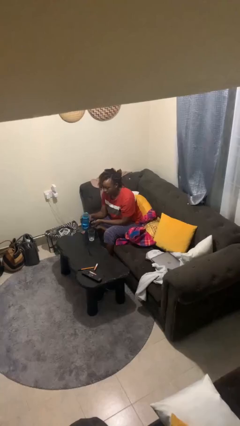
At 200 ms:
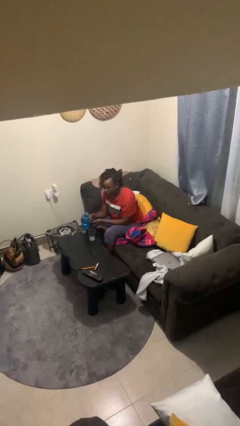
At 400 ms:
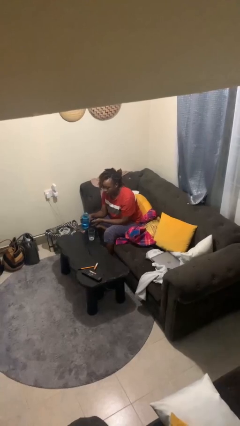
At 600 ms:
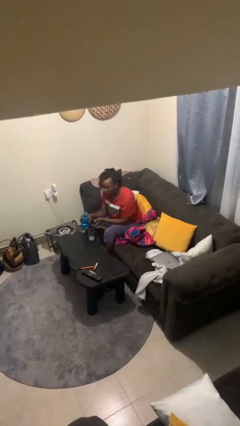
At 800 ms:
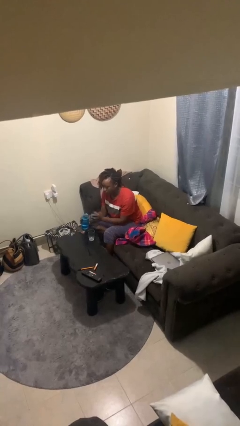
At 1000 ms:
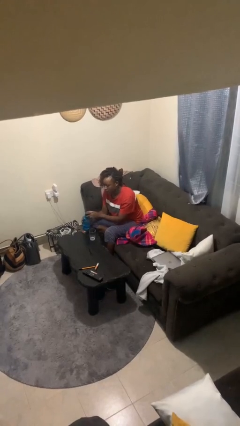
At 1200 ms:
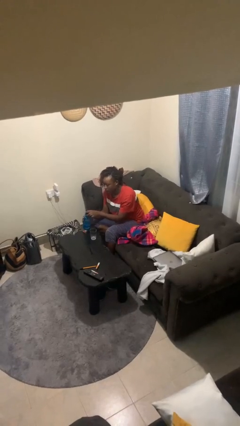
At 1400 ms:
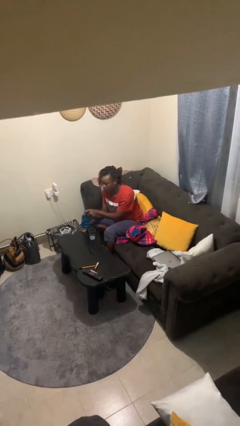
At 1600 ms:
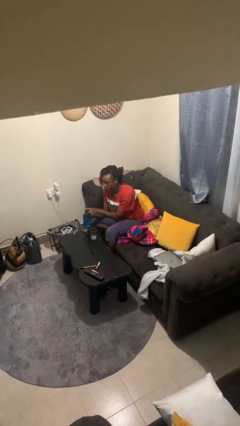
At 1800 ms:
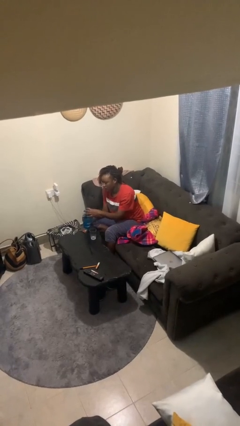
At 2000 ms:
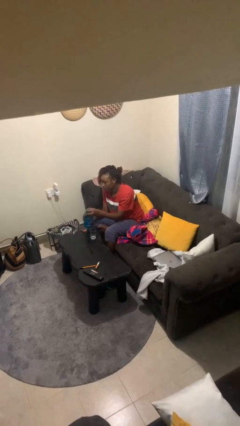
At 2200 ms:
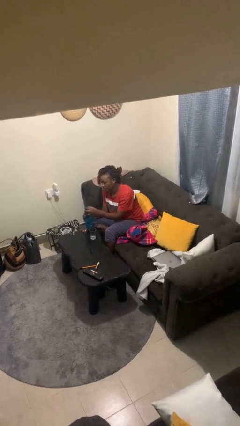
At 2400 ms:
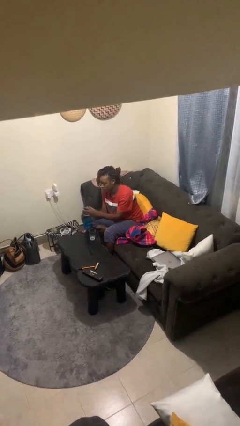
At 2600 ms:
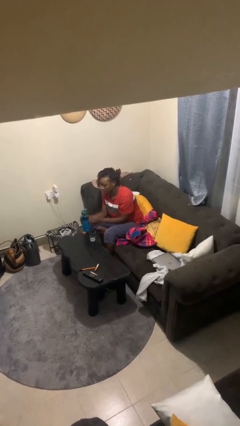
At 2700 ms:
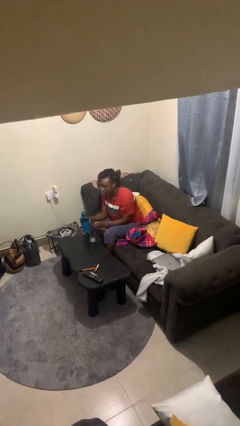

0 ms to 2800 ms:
person screws lid to bottle

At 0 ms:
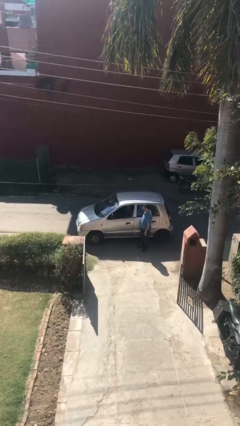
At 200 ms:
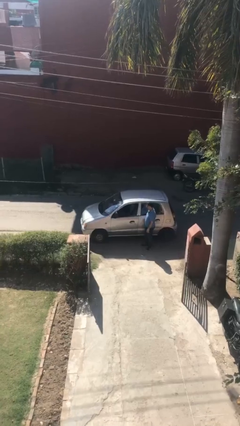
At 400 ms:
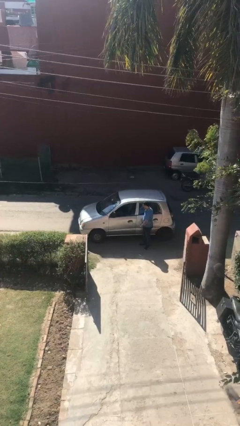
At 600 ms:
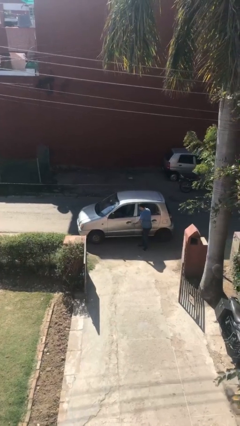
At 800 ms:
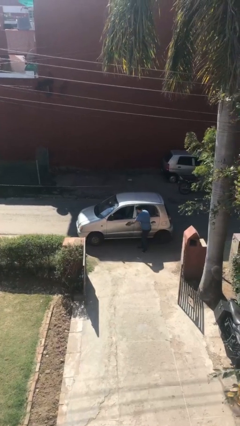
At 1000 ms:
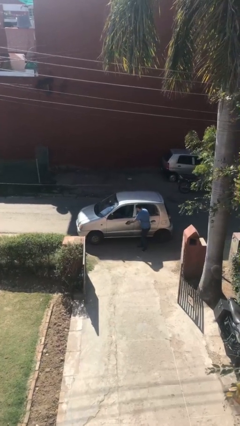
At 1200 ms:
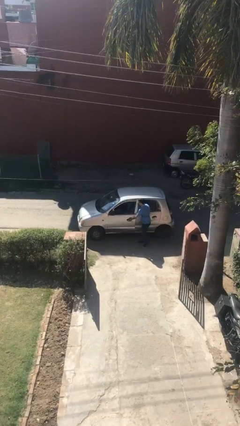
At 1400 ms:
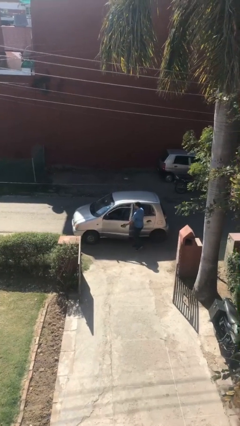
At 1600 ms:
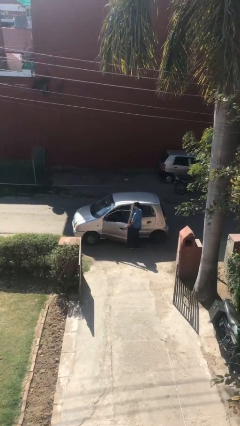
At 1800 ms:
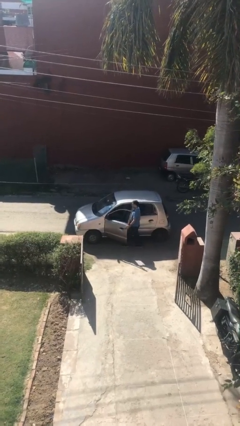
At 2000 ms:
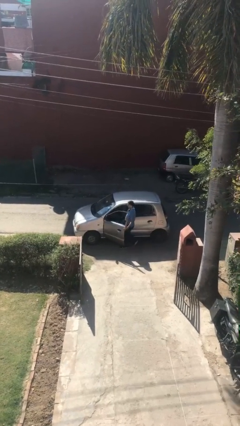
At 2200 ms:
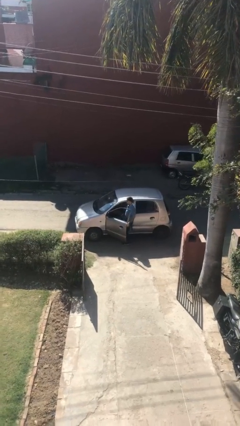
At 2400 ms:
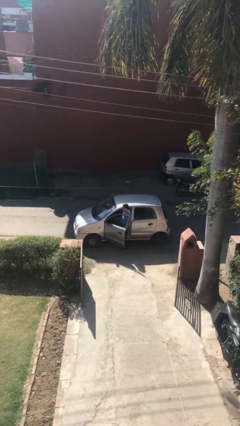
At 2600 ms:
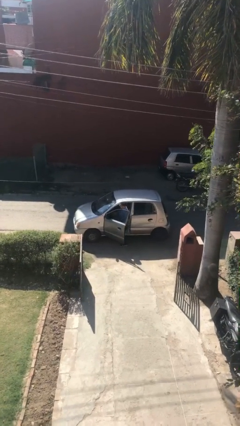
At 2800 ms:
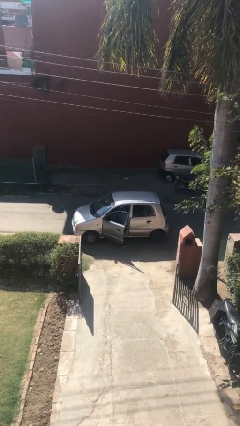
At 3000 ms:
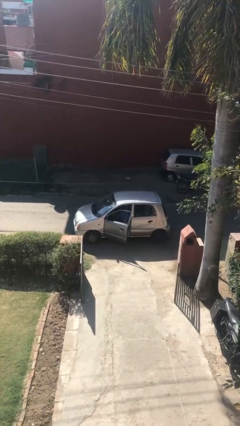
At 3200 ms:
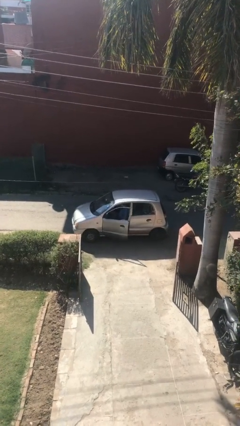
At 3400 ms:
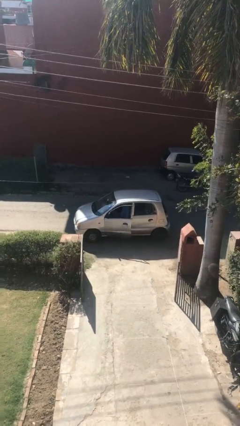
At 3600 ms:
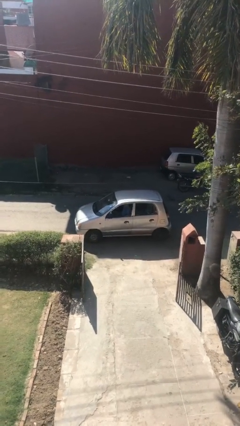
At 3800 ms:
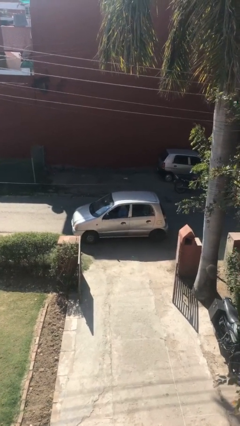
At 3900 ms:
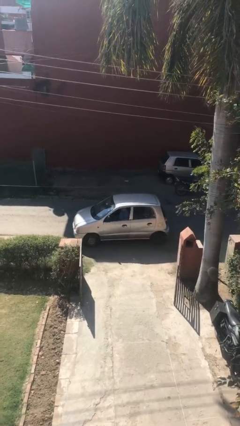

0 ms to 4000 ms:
car picks up person

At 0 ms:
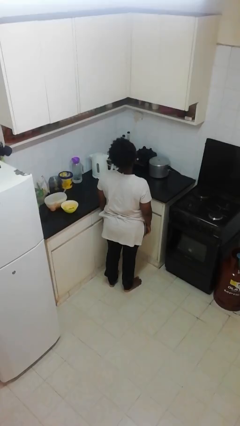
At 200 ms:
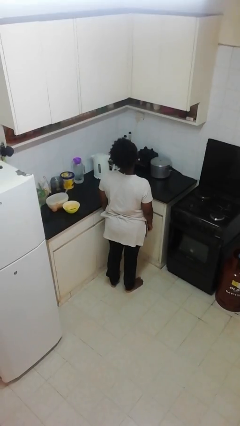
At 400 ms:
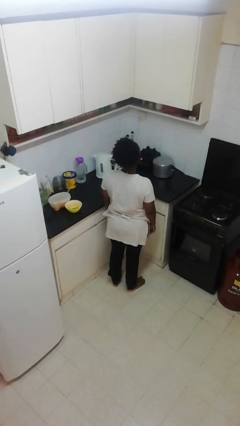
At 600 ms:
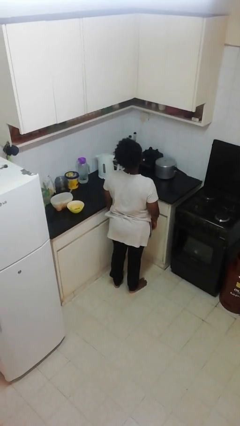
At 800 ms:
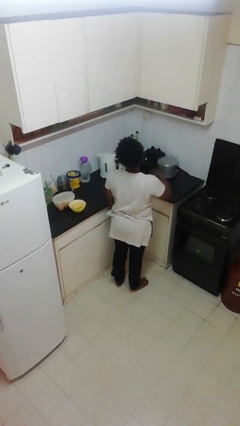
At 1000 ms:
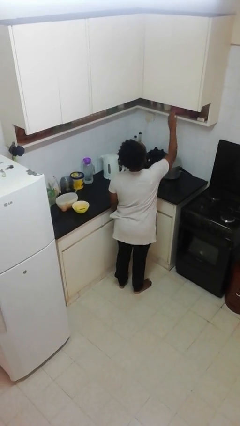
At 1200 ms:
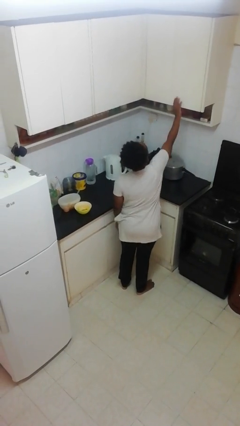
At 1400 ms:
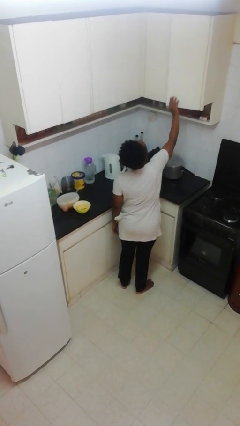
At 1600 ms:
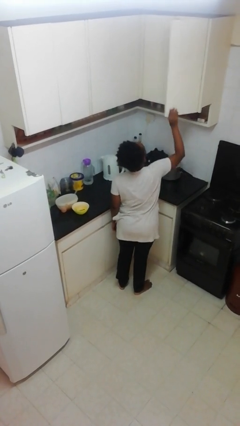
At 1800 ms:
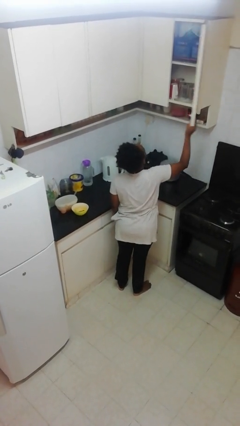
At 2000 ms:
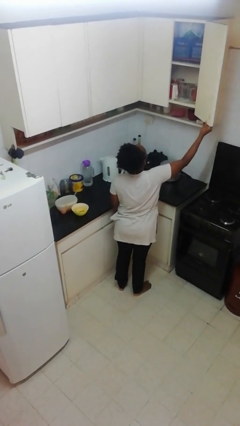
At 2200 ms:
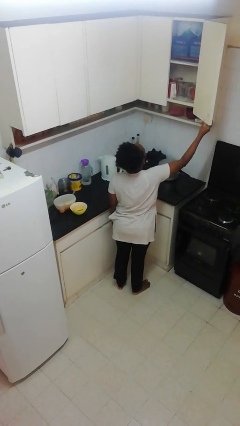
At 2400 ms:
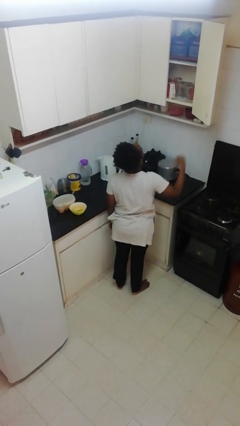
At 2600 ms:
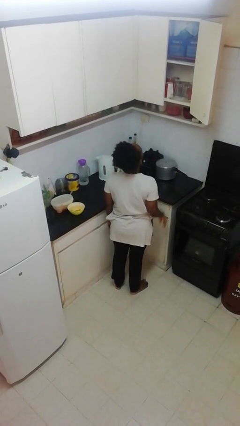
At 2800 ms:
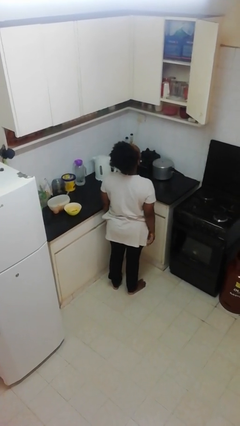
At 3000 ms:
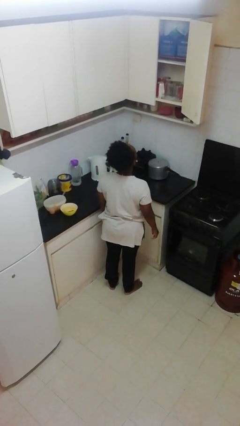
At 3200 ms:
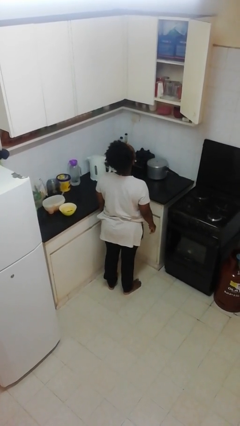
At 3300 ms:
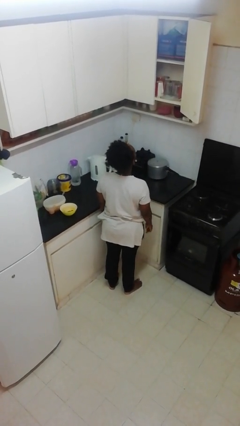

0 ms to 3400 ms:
person opens cabinet

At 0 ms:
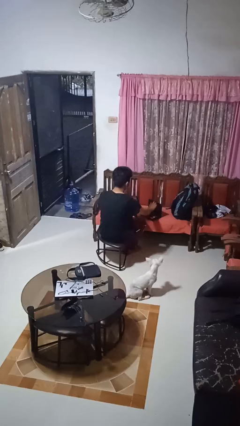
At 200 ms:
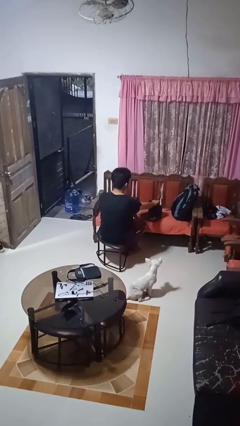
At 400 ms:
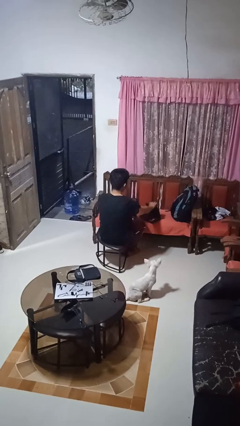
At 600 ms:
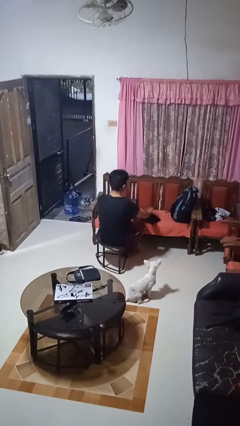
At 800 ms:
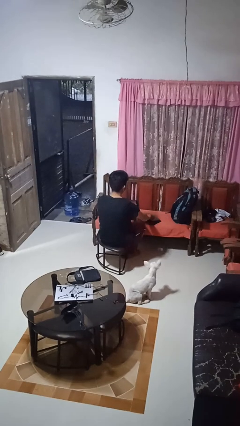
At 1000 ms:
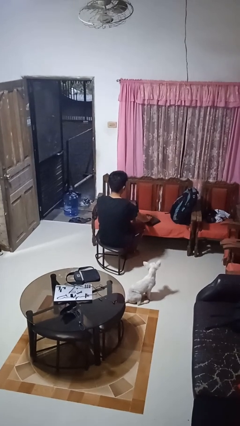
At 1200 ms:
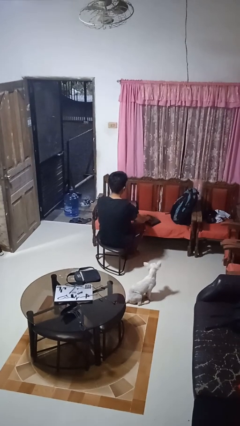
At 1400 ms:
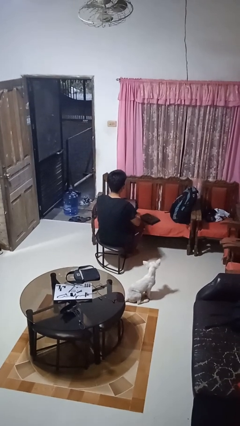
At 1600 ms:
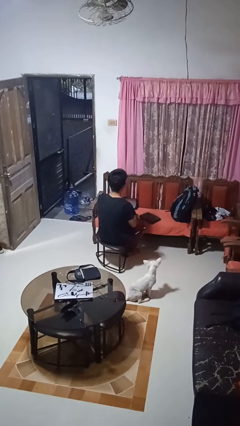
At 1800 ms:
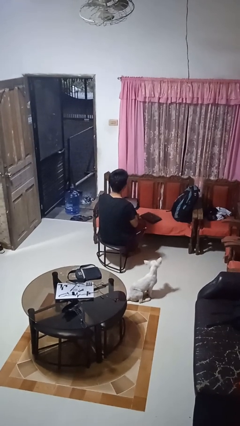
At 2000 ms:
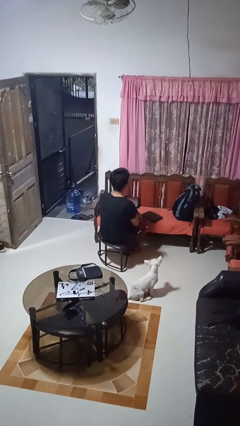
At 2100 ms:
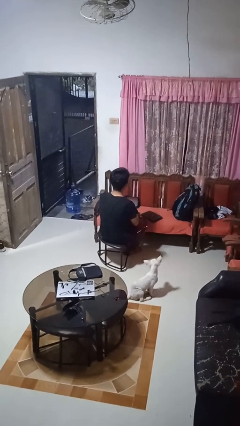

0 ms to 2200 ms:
person closes laptop

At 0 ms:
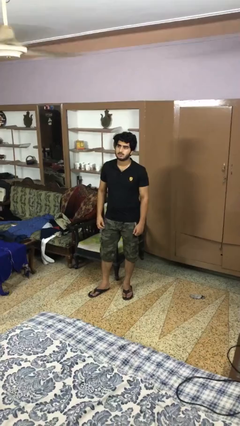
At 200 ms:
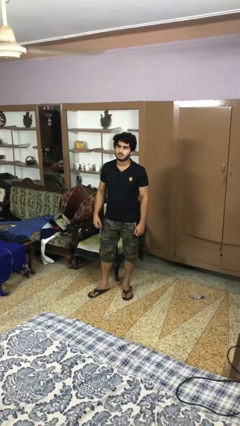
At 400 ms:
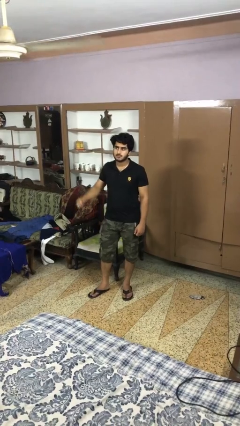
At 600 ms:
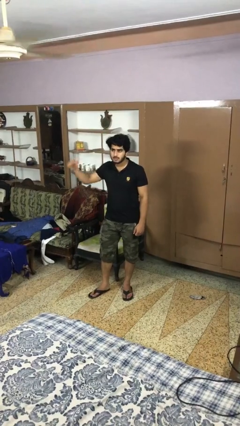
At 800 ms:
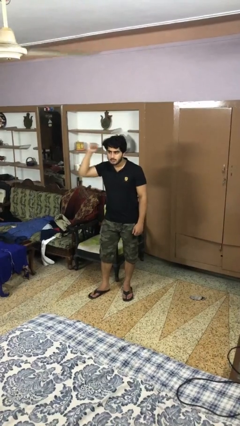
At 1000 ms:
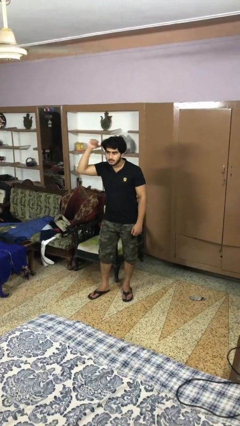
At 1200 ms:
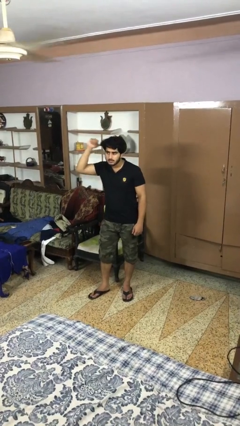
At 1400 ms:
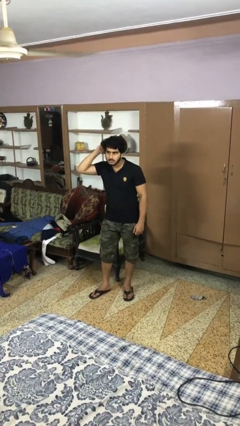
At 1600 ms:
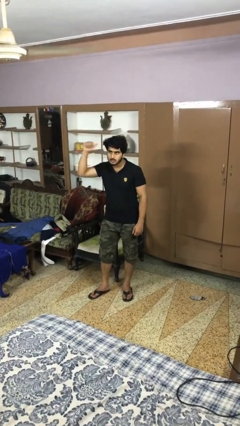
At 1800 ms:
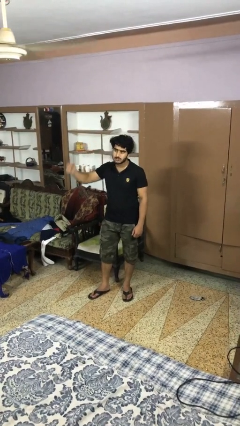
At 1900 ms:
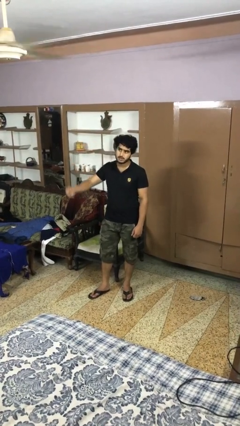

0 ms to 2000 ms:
person gestures behind me

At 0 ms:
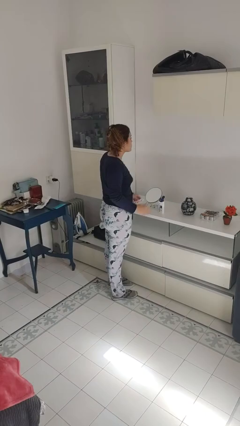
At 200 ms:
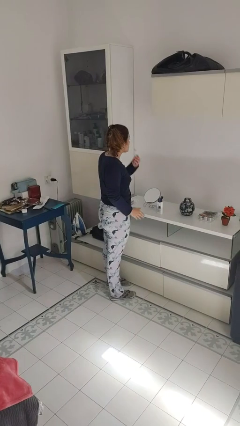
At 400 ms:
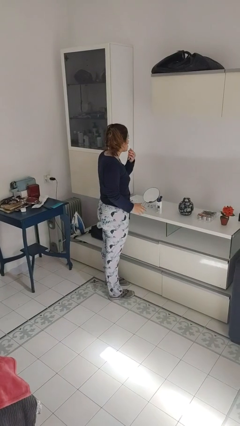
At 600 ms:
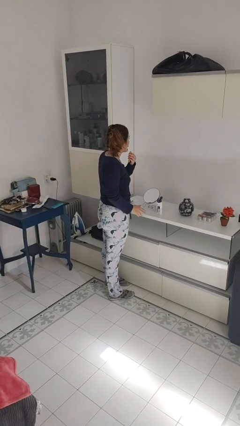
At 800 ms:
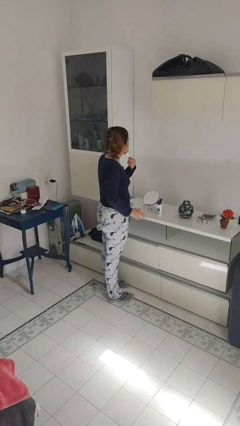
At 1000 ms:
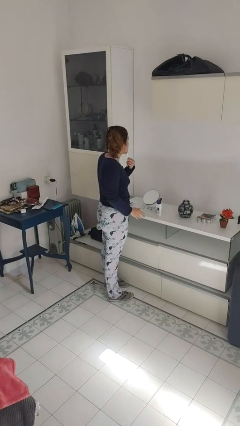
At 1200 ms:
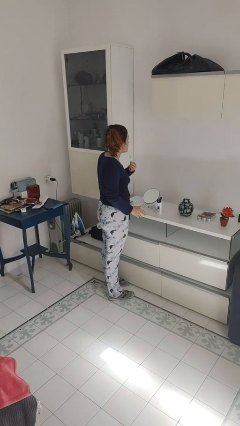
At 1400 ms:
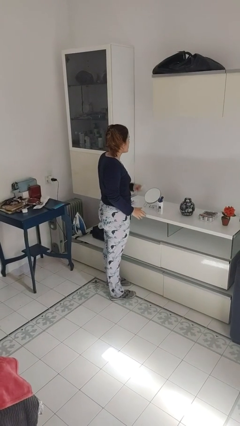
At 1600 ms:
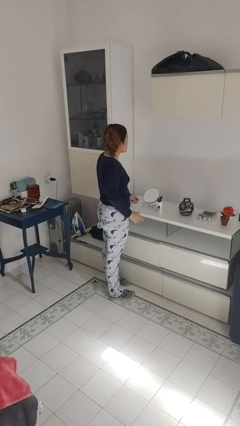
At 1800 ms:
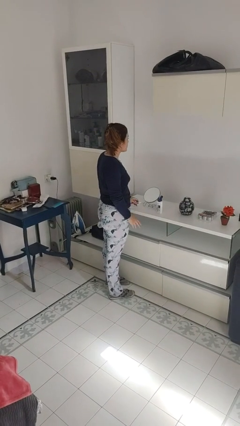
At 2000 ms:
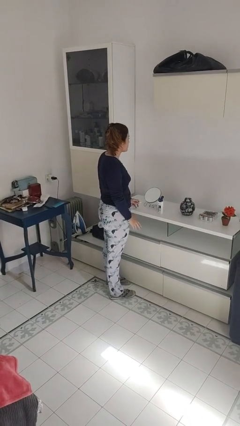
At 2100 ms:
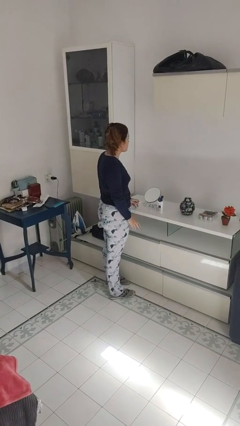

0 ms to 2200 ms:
person shaves face

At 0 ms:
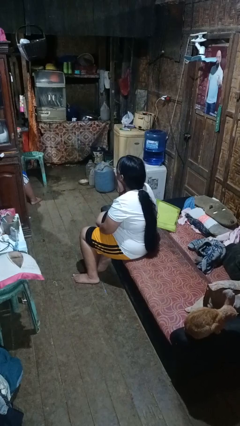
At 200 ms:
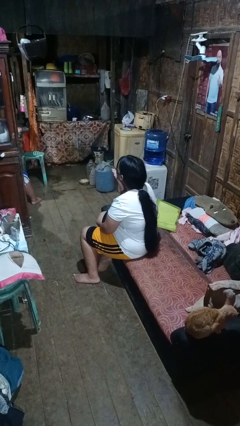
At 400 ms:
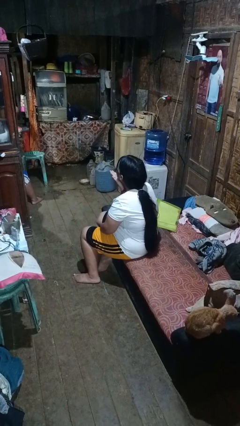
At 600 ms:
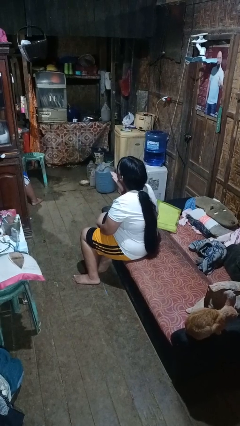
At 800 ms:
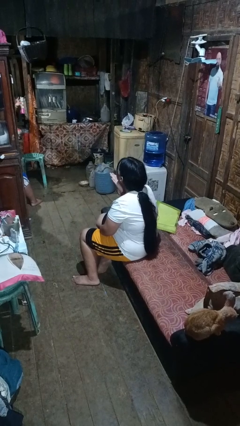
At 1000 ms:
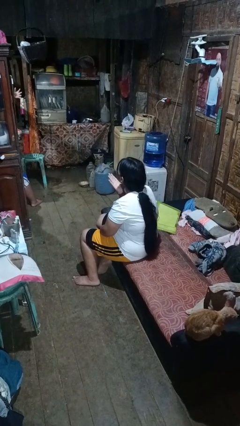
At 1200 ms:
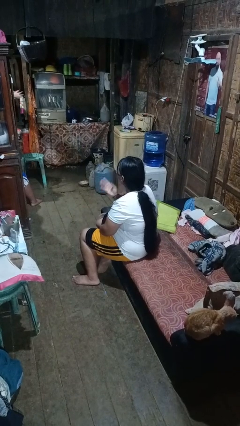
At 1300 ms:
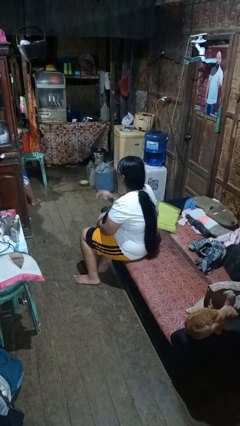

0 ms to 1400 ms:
person gestures blow kiss
